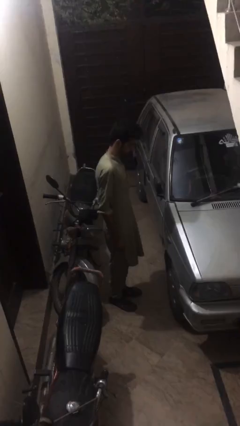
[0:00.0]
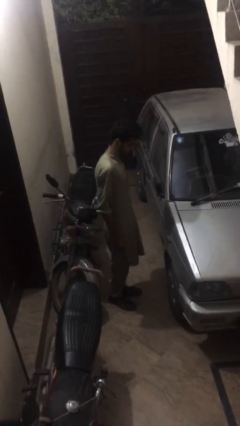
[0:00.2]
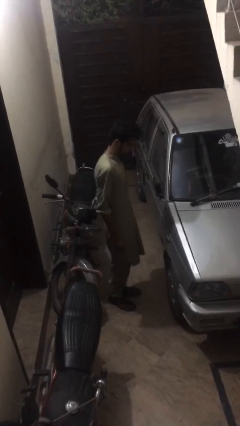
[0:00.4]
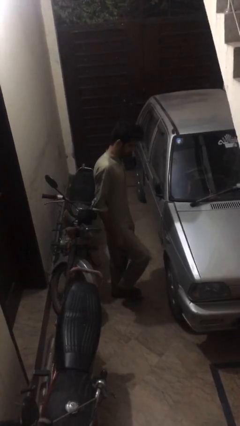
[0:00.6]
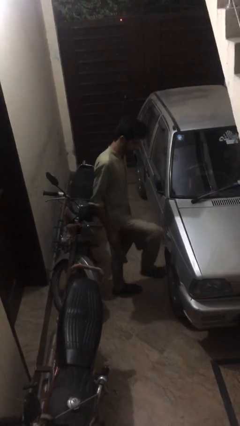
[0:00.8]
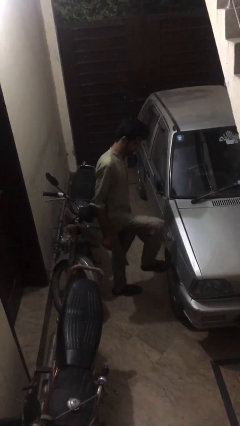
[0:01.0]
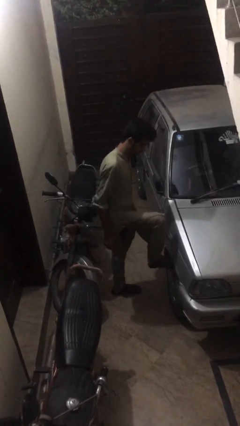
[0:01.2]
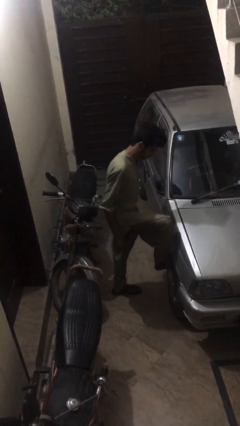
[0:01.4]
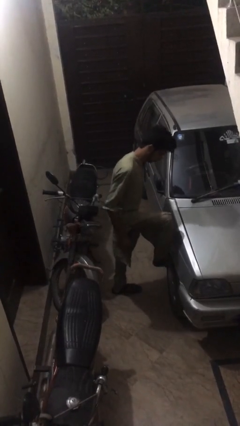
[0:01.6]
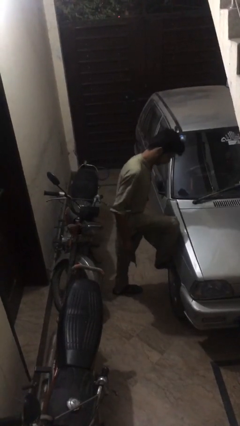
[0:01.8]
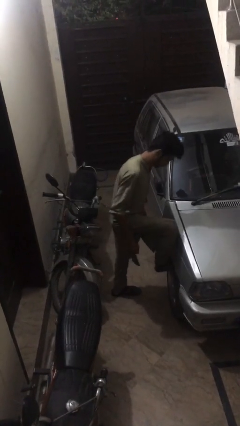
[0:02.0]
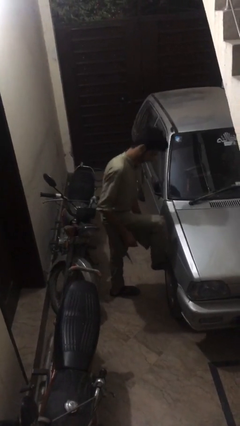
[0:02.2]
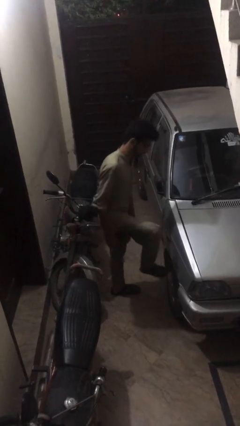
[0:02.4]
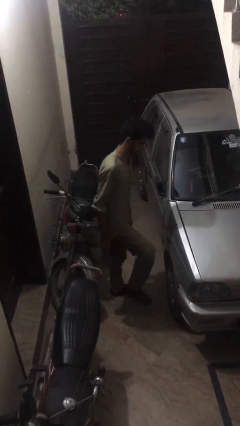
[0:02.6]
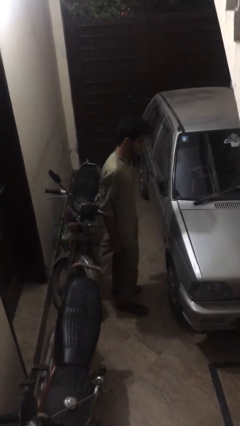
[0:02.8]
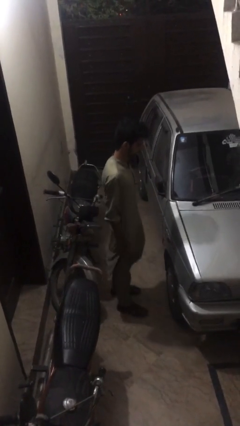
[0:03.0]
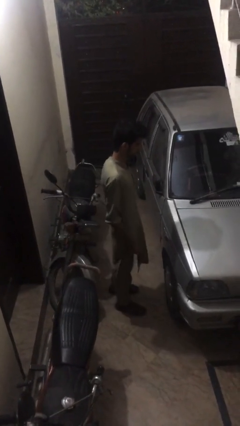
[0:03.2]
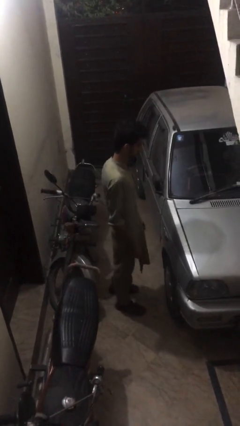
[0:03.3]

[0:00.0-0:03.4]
person kicks car tires

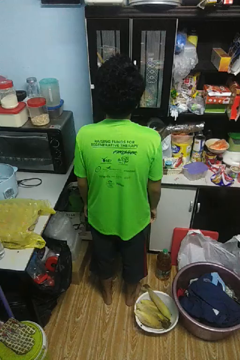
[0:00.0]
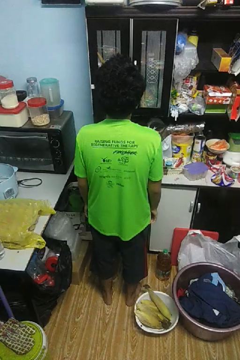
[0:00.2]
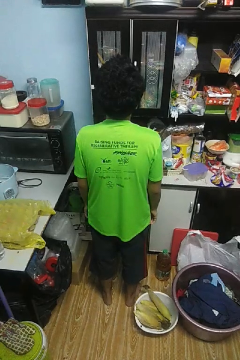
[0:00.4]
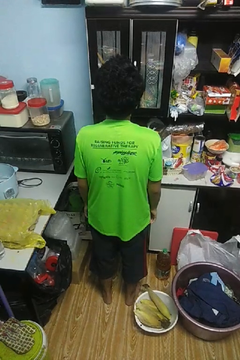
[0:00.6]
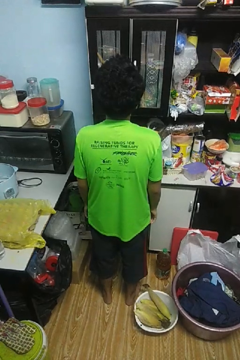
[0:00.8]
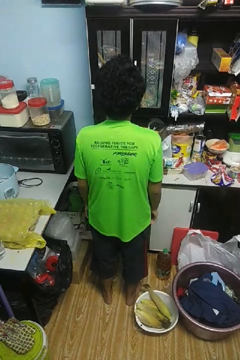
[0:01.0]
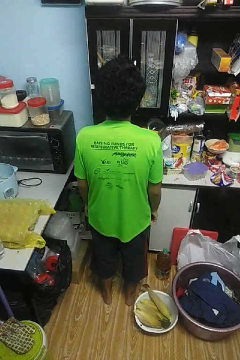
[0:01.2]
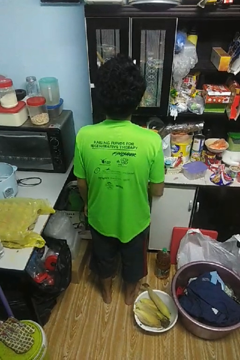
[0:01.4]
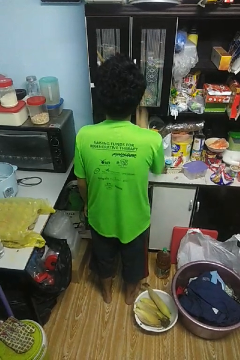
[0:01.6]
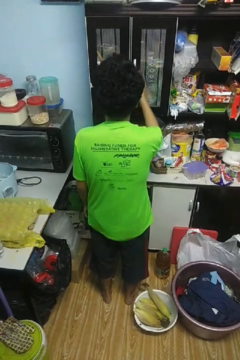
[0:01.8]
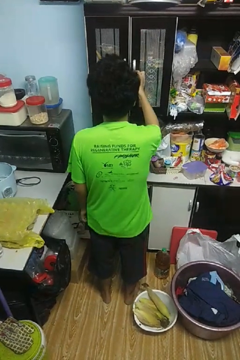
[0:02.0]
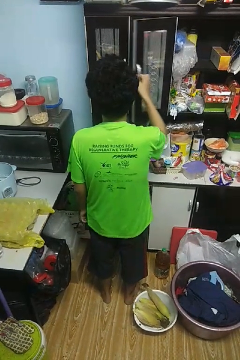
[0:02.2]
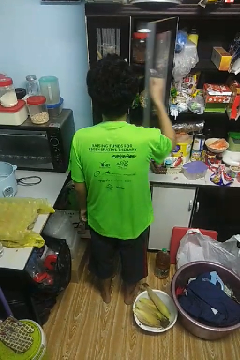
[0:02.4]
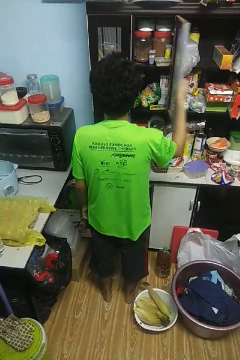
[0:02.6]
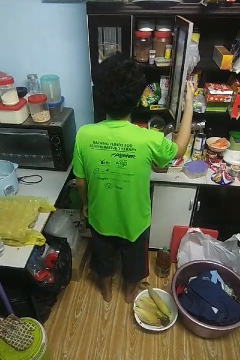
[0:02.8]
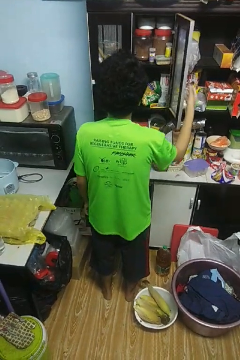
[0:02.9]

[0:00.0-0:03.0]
person opens cabinet

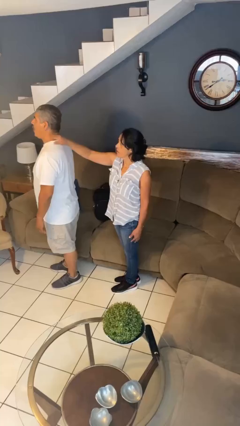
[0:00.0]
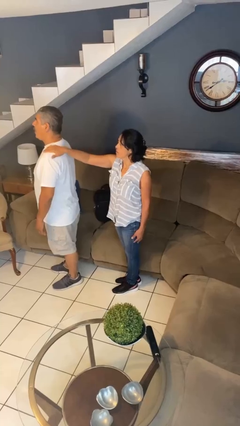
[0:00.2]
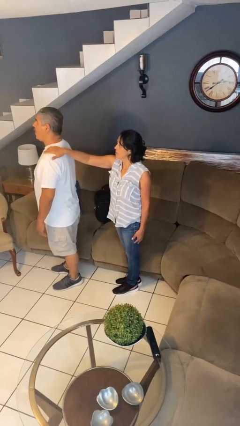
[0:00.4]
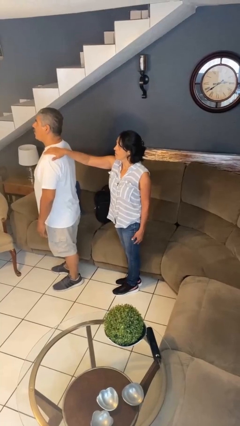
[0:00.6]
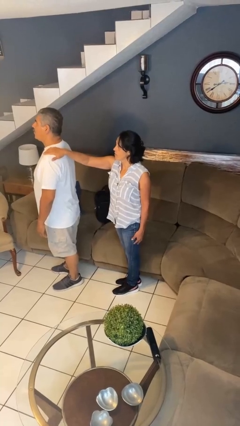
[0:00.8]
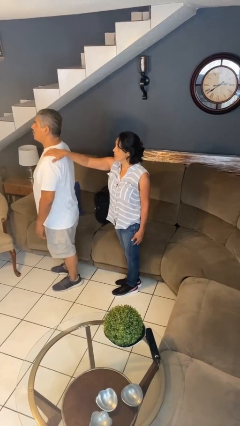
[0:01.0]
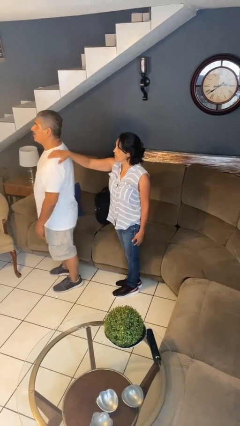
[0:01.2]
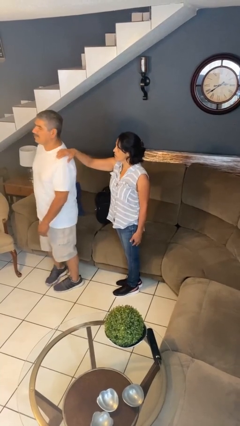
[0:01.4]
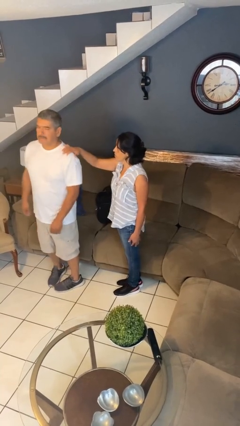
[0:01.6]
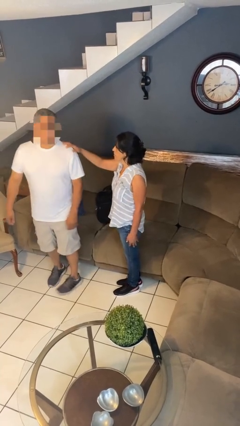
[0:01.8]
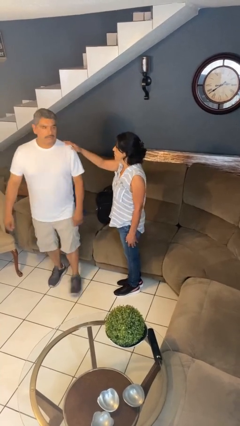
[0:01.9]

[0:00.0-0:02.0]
person grabs person by shoulder

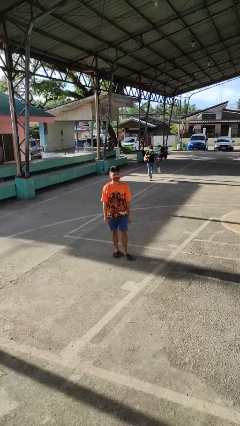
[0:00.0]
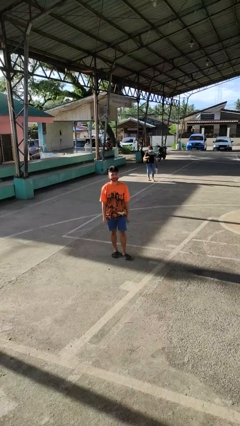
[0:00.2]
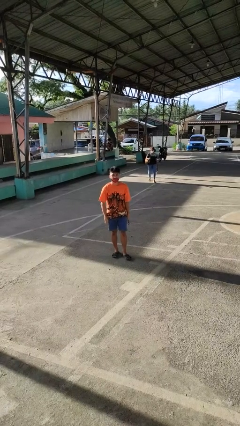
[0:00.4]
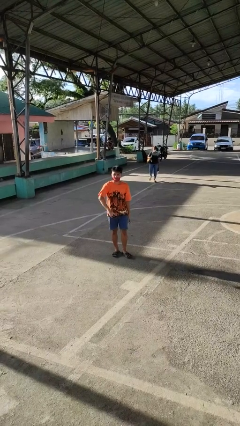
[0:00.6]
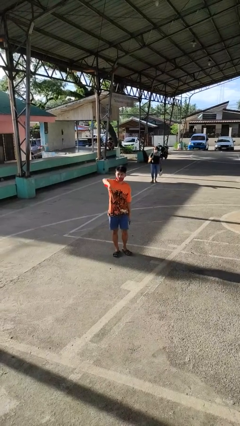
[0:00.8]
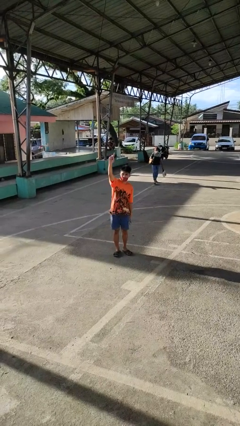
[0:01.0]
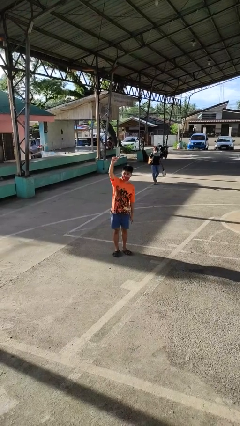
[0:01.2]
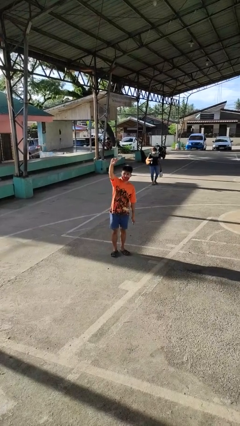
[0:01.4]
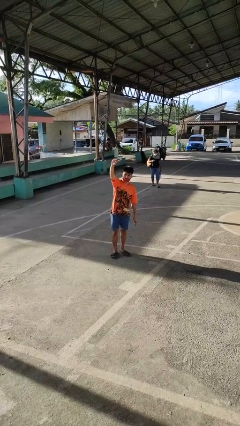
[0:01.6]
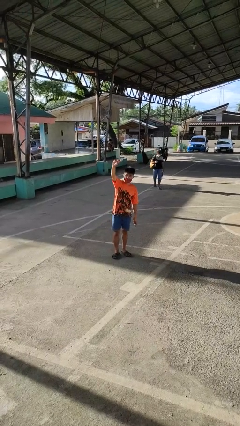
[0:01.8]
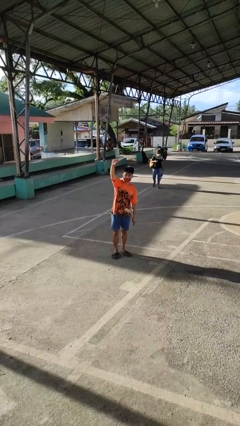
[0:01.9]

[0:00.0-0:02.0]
person gestures swipe up

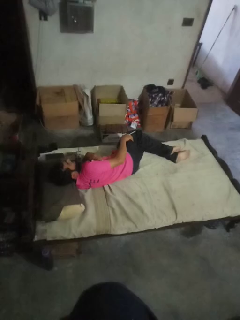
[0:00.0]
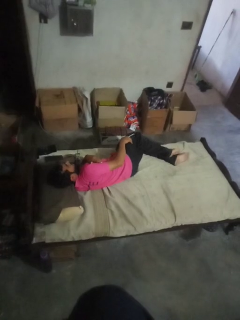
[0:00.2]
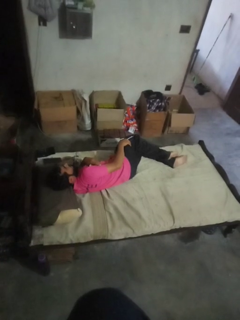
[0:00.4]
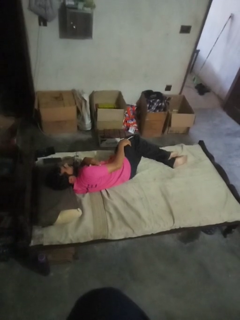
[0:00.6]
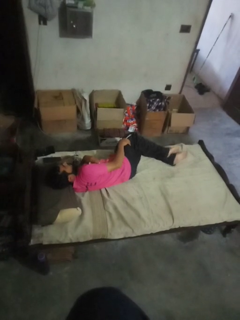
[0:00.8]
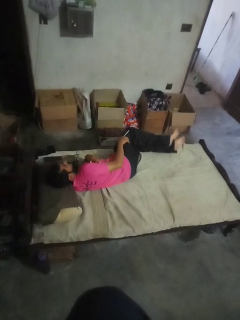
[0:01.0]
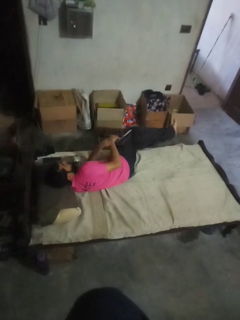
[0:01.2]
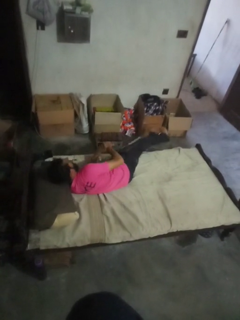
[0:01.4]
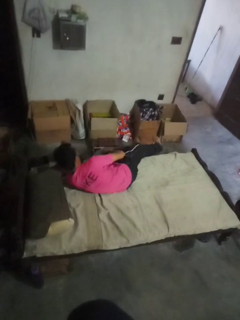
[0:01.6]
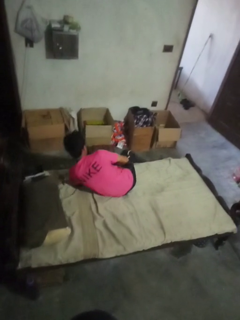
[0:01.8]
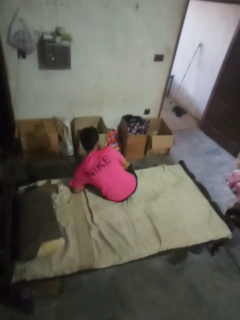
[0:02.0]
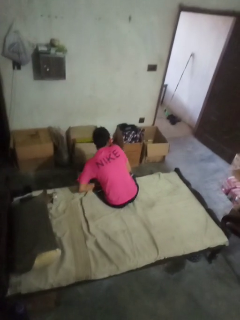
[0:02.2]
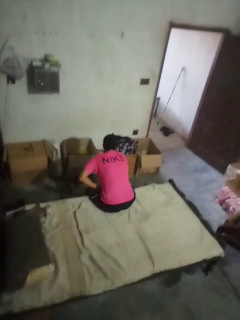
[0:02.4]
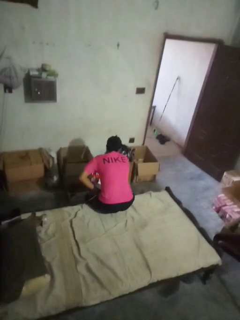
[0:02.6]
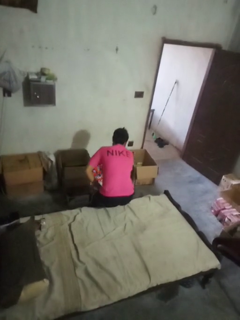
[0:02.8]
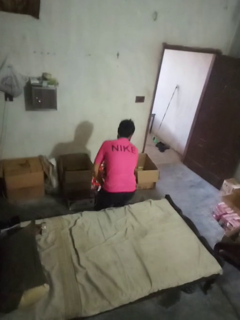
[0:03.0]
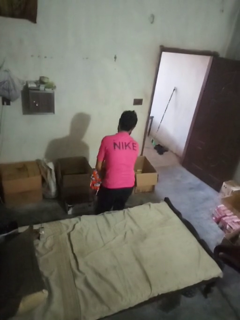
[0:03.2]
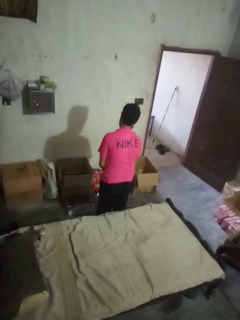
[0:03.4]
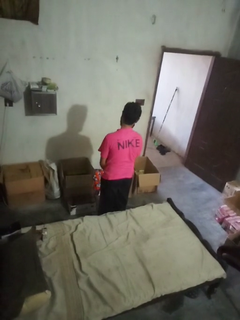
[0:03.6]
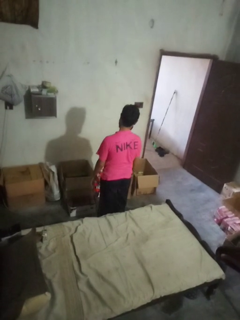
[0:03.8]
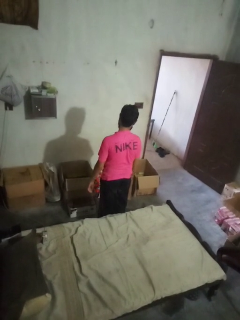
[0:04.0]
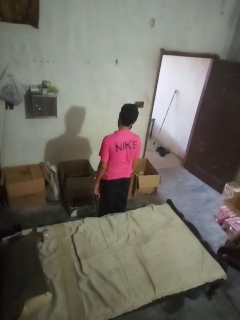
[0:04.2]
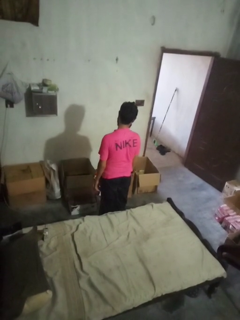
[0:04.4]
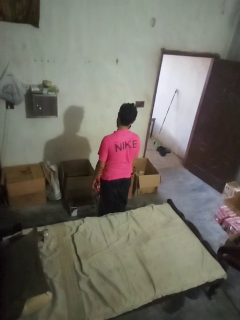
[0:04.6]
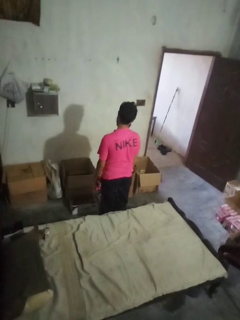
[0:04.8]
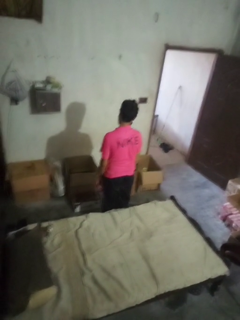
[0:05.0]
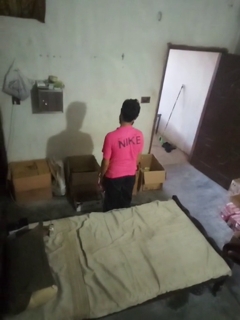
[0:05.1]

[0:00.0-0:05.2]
person stands up

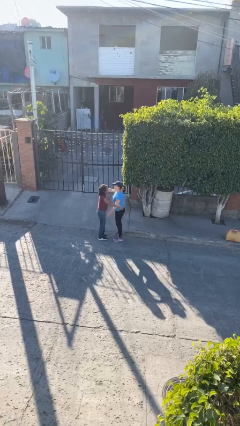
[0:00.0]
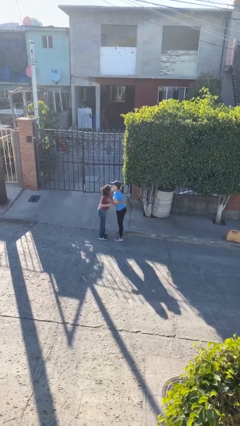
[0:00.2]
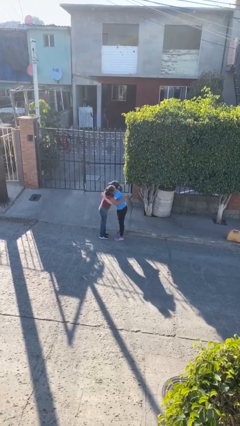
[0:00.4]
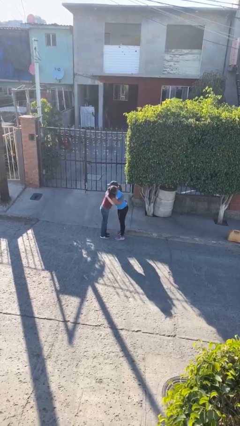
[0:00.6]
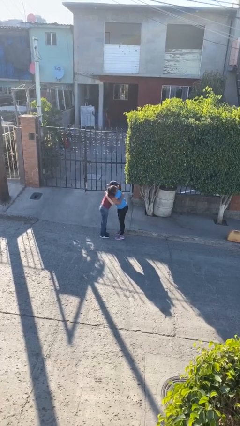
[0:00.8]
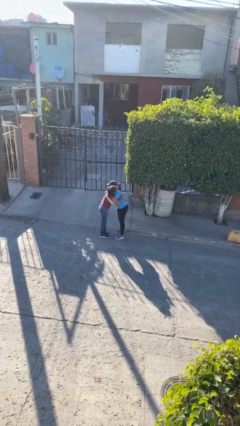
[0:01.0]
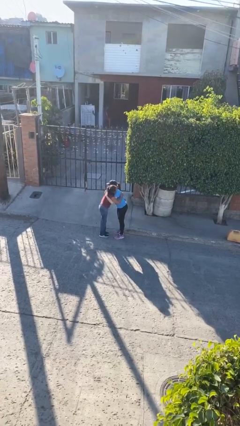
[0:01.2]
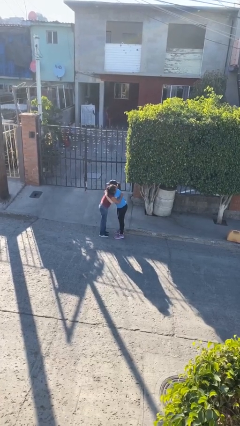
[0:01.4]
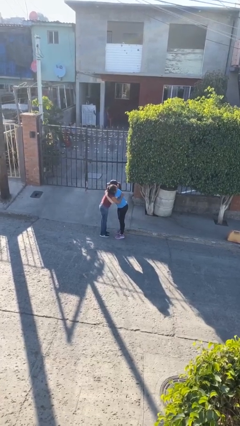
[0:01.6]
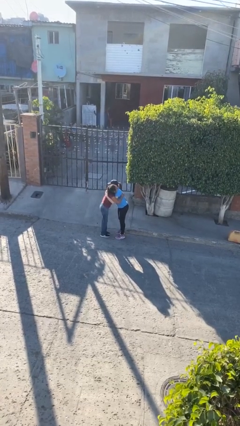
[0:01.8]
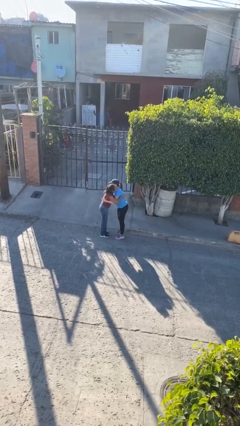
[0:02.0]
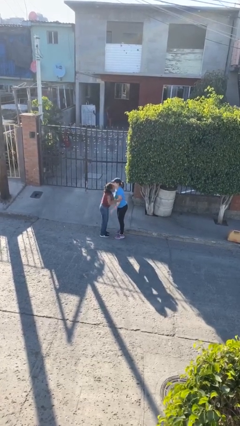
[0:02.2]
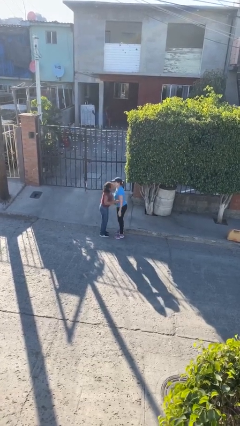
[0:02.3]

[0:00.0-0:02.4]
person embraces person

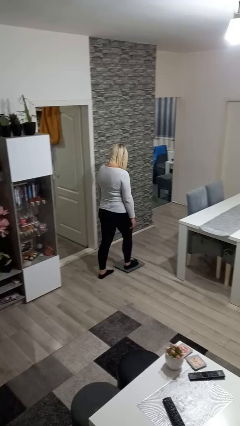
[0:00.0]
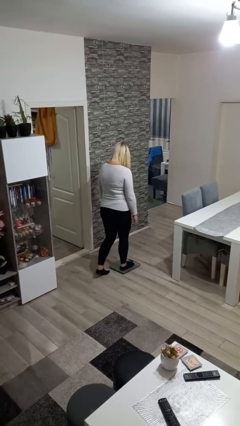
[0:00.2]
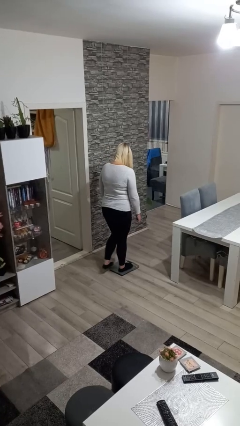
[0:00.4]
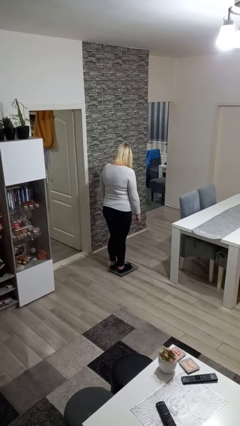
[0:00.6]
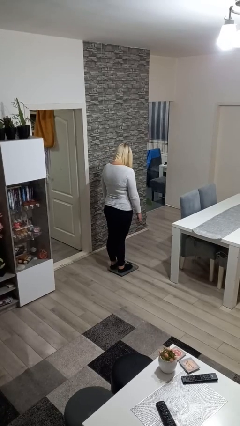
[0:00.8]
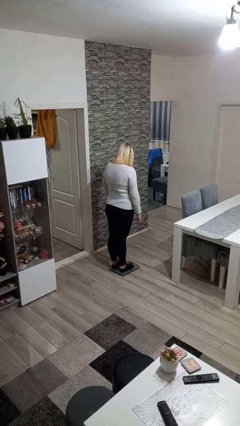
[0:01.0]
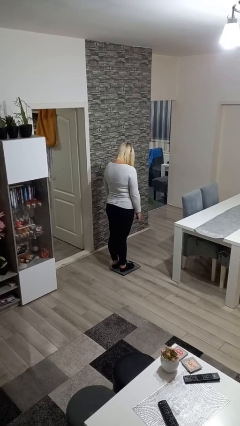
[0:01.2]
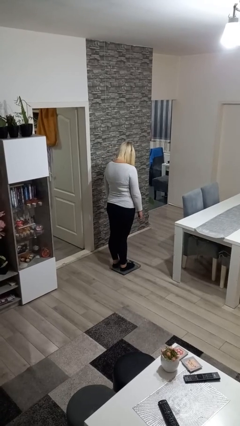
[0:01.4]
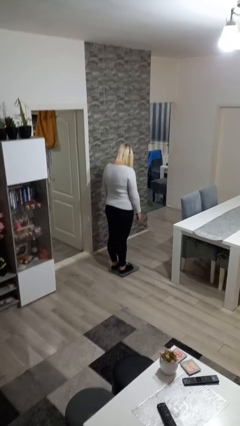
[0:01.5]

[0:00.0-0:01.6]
person uses bodyweight scale
